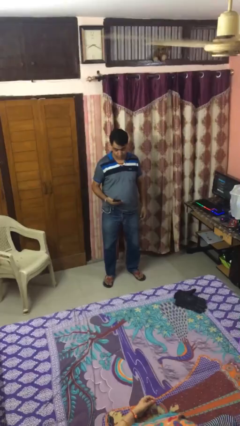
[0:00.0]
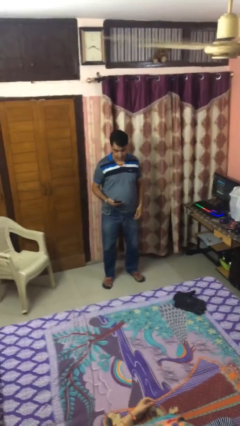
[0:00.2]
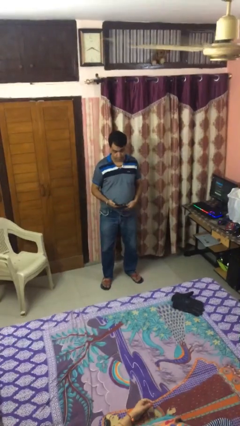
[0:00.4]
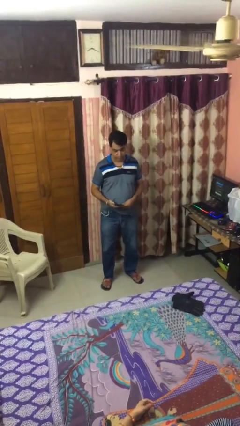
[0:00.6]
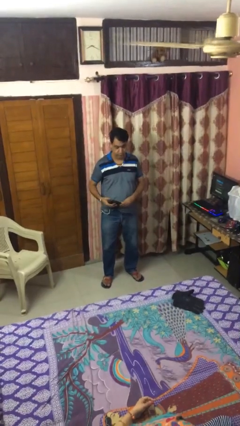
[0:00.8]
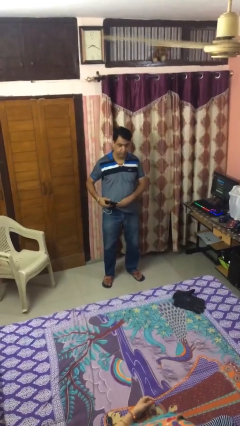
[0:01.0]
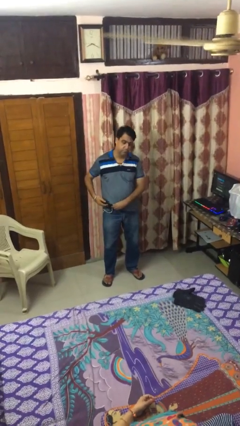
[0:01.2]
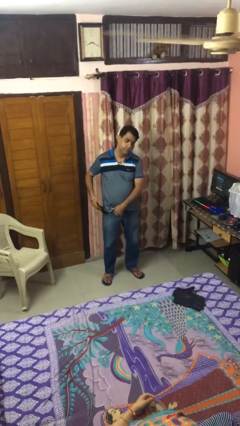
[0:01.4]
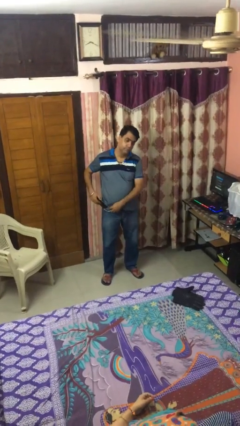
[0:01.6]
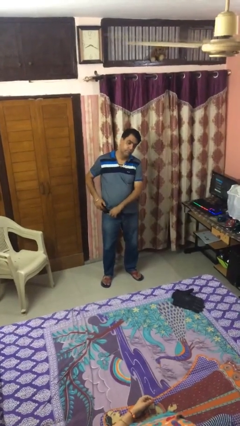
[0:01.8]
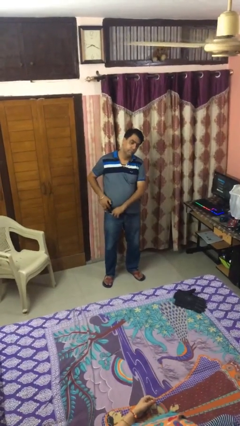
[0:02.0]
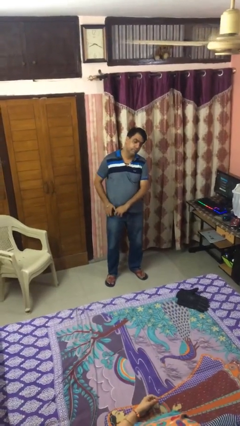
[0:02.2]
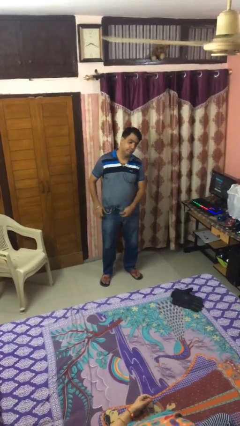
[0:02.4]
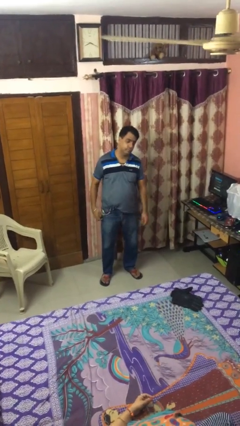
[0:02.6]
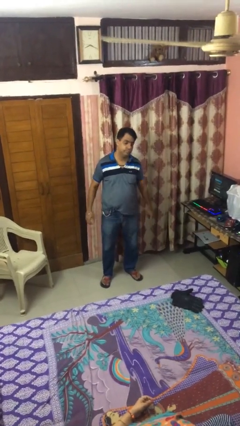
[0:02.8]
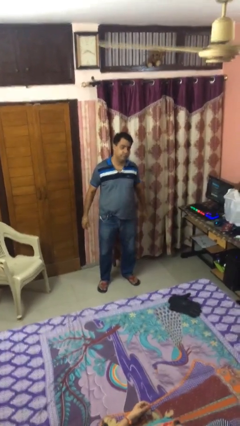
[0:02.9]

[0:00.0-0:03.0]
person puts phone into pocket

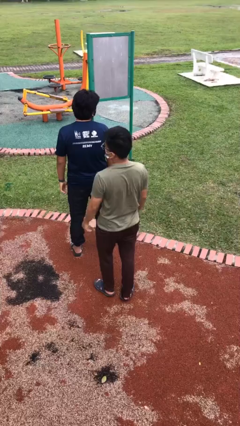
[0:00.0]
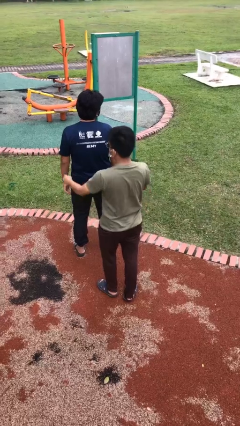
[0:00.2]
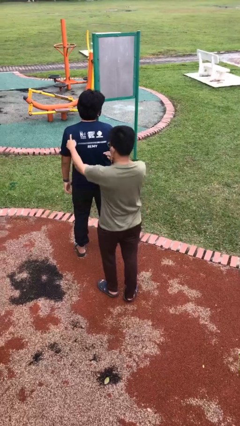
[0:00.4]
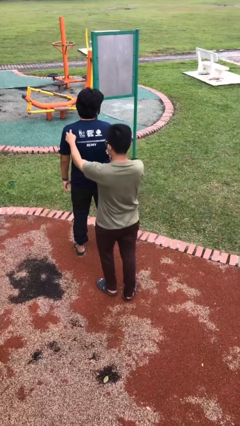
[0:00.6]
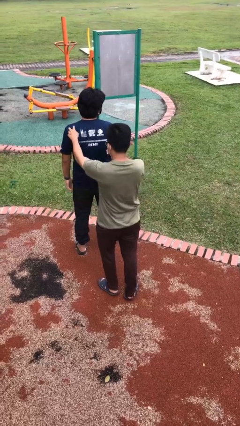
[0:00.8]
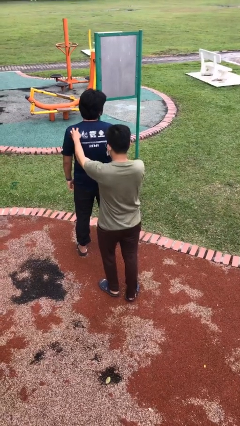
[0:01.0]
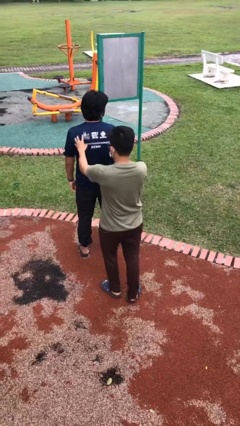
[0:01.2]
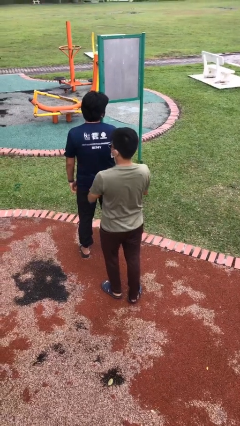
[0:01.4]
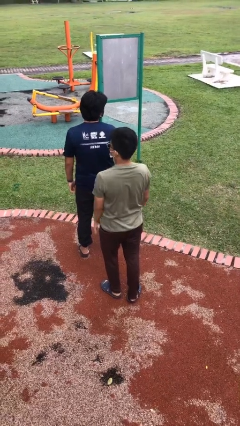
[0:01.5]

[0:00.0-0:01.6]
person tickles person

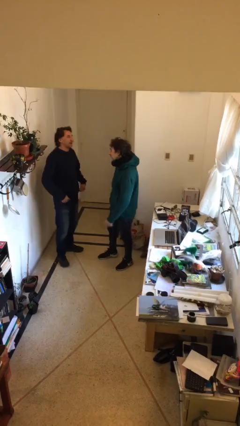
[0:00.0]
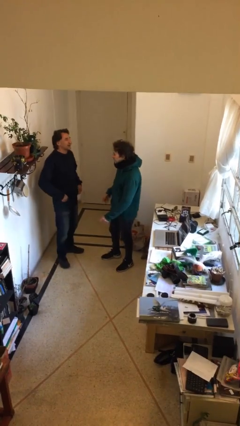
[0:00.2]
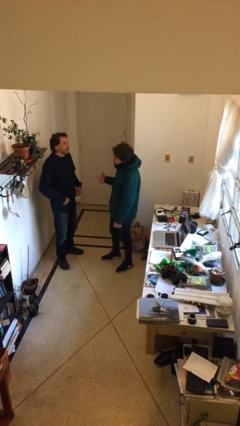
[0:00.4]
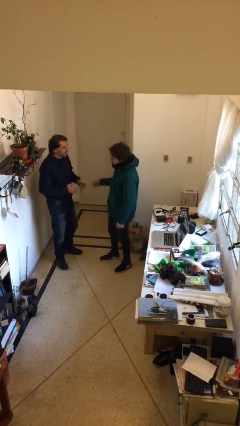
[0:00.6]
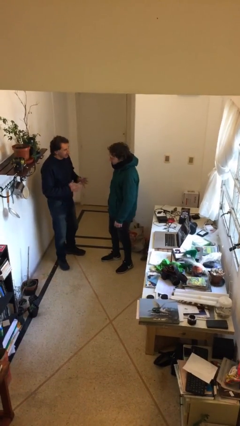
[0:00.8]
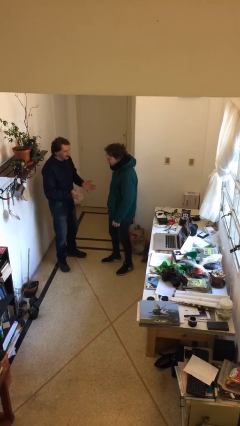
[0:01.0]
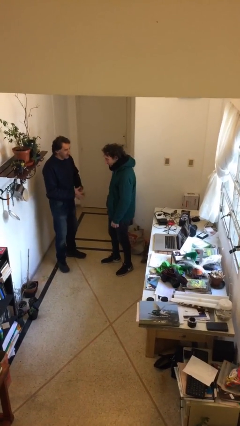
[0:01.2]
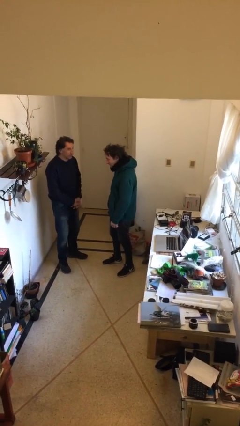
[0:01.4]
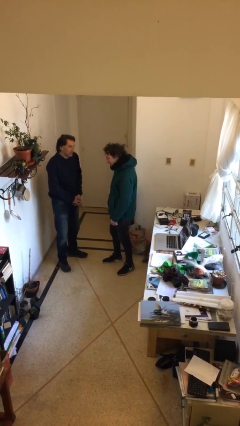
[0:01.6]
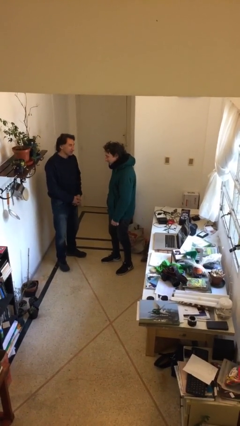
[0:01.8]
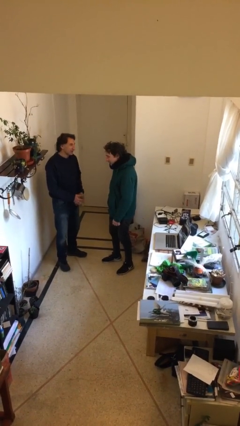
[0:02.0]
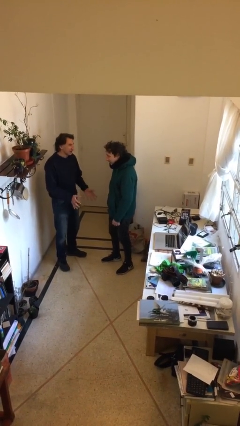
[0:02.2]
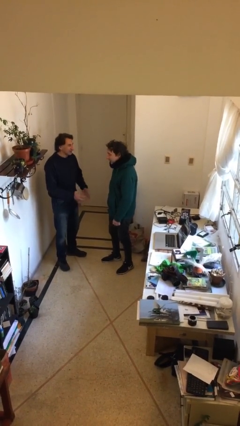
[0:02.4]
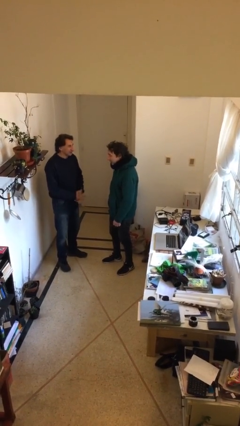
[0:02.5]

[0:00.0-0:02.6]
person talks to person

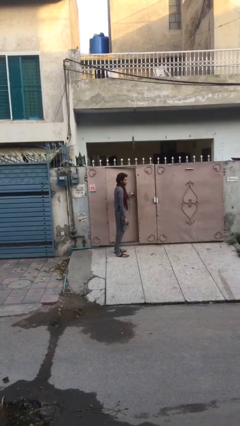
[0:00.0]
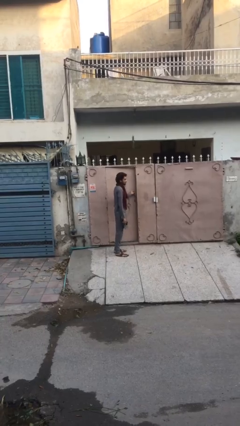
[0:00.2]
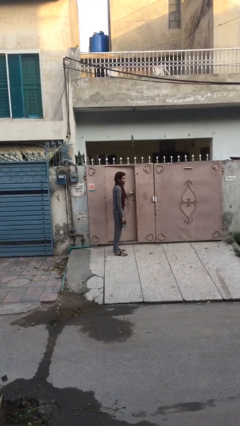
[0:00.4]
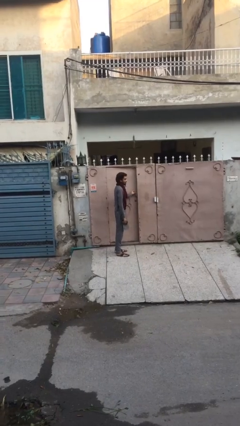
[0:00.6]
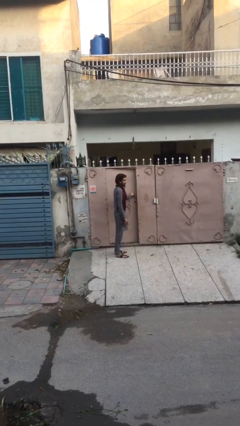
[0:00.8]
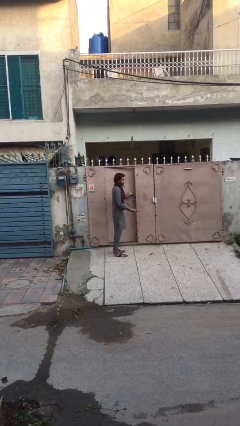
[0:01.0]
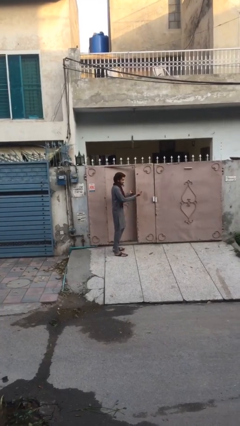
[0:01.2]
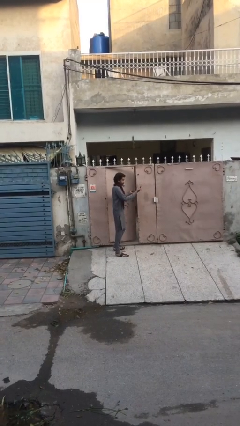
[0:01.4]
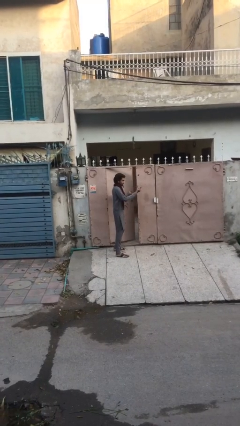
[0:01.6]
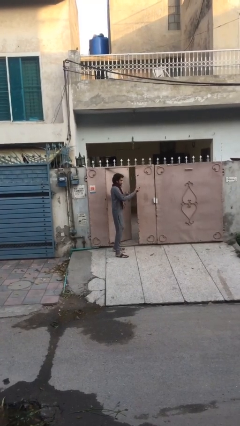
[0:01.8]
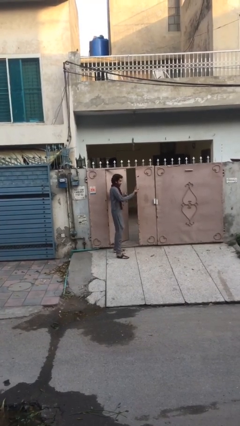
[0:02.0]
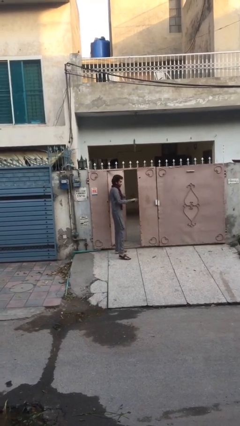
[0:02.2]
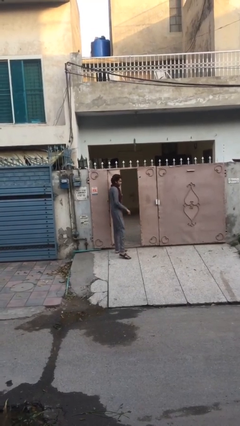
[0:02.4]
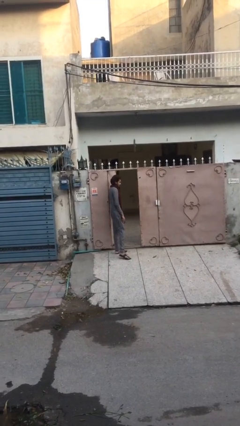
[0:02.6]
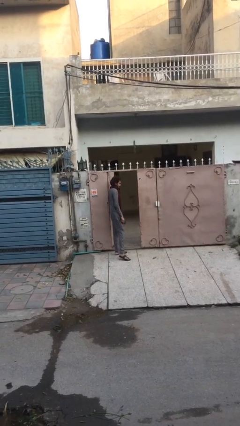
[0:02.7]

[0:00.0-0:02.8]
person opens facility door

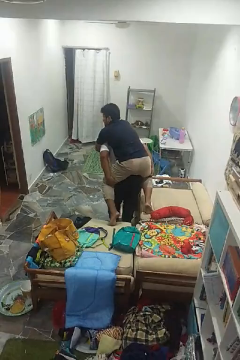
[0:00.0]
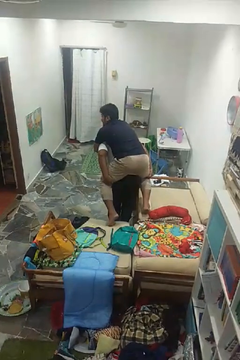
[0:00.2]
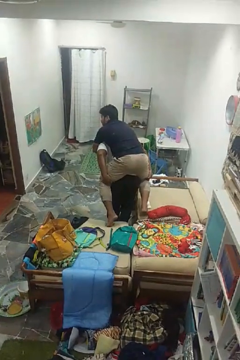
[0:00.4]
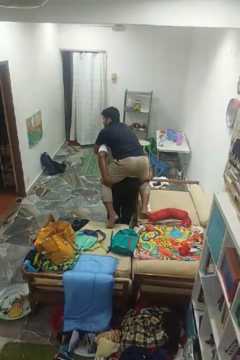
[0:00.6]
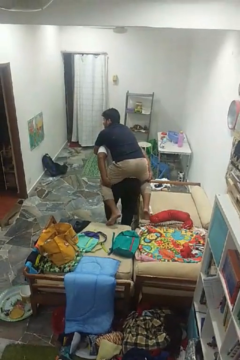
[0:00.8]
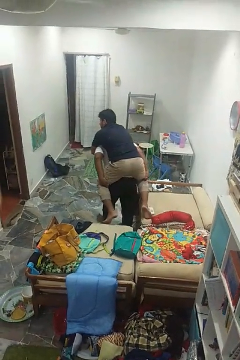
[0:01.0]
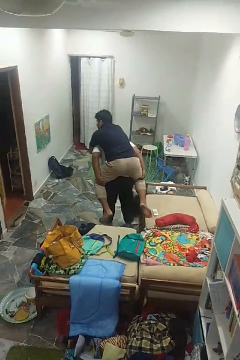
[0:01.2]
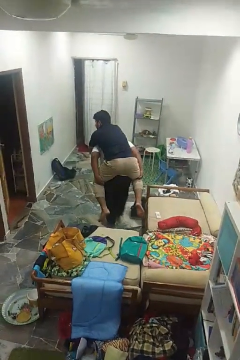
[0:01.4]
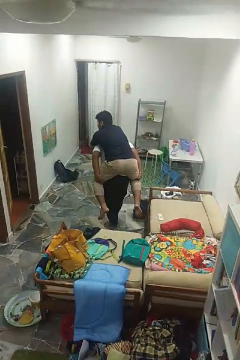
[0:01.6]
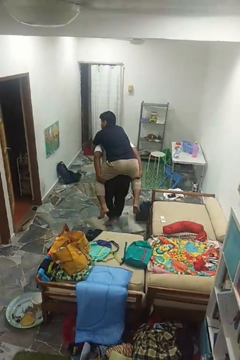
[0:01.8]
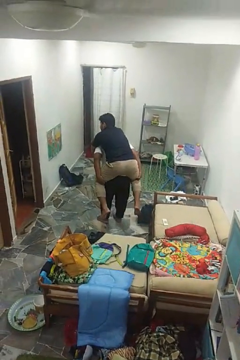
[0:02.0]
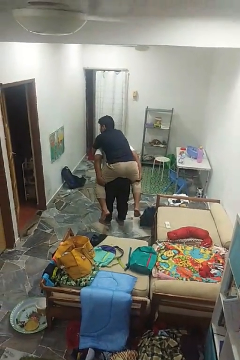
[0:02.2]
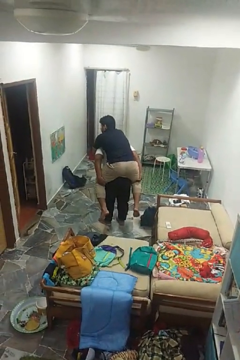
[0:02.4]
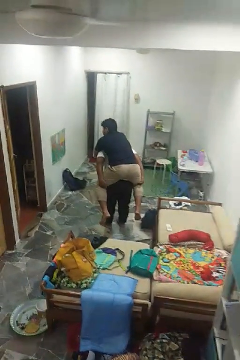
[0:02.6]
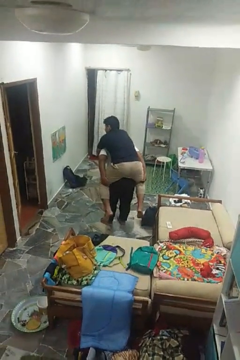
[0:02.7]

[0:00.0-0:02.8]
person carries person on back

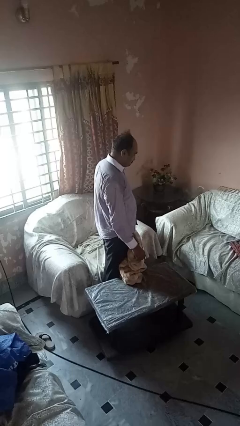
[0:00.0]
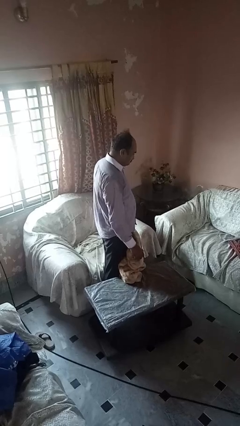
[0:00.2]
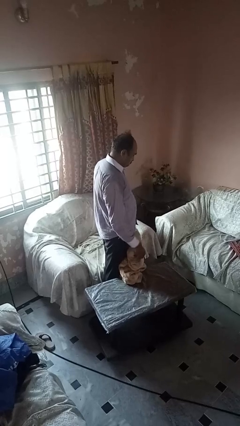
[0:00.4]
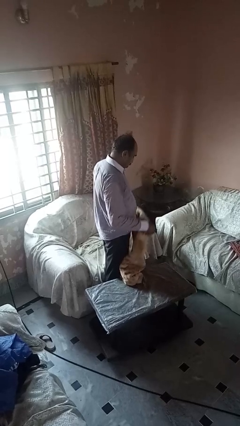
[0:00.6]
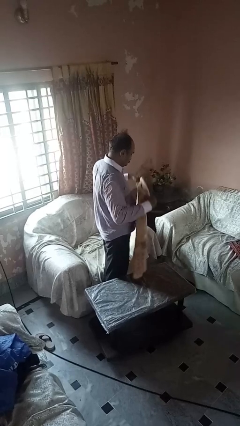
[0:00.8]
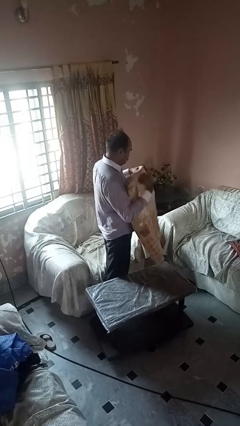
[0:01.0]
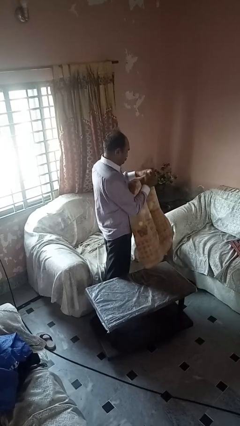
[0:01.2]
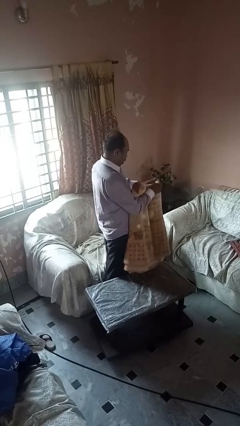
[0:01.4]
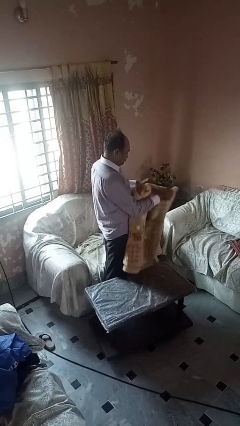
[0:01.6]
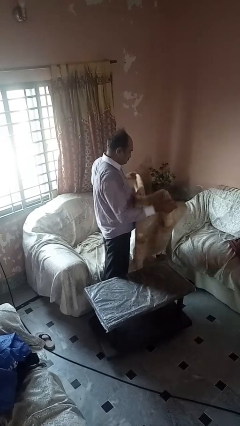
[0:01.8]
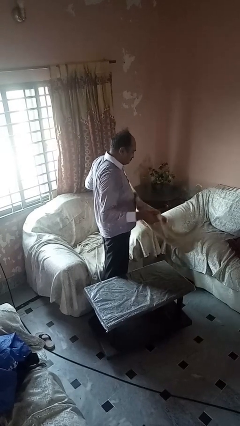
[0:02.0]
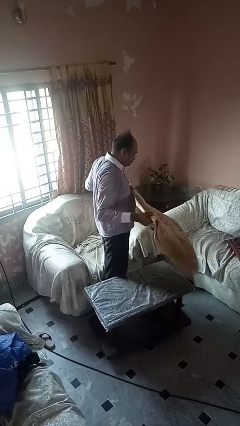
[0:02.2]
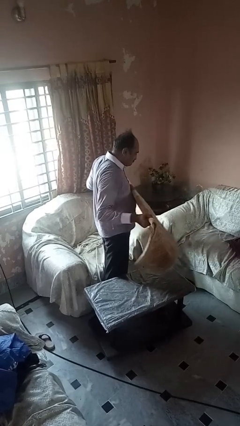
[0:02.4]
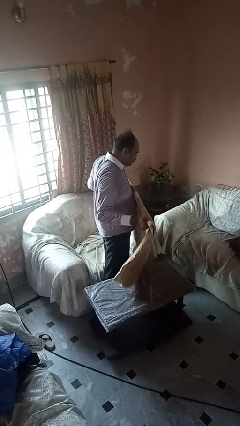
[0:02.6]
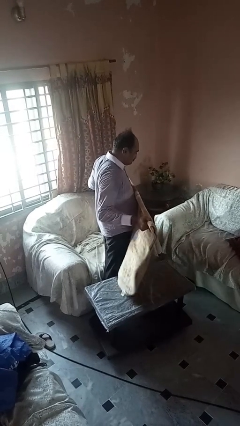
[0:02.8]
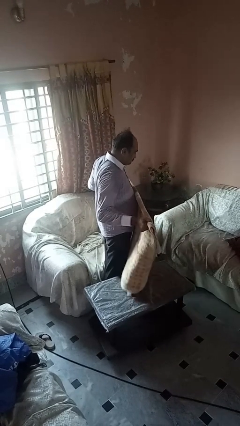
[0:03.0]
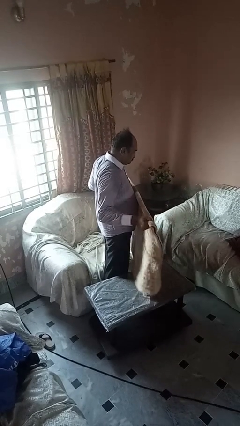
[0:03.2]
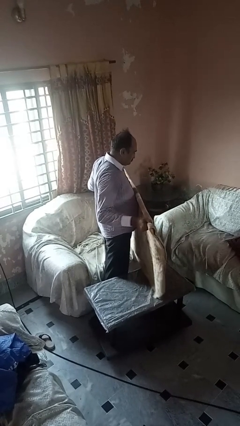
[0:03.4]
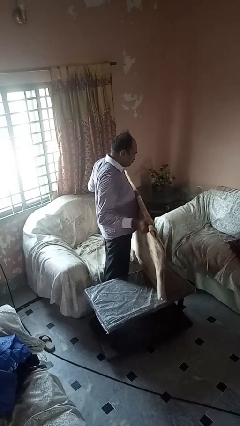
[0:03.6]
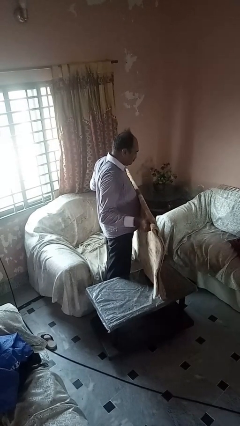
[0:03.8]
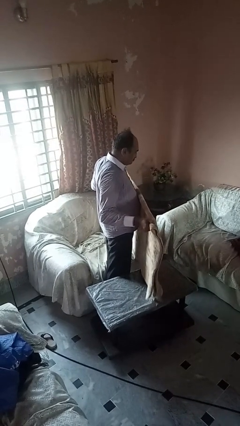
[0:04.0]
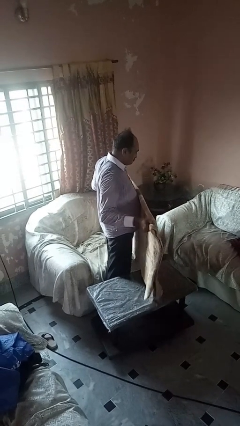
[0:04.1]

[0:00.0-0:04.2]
person unfolds blanket

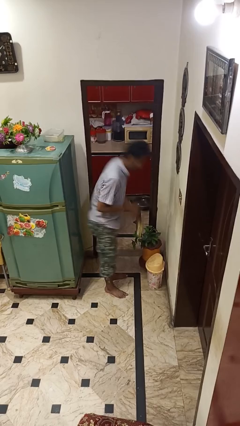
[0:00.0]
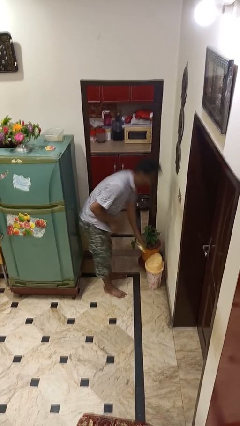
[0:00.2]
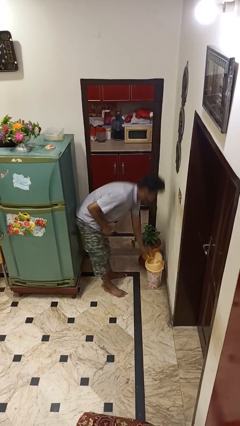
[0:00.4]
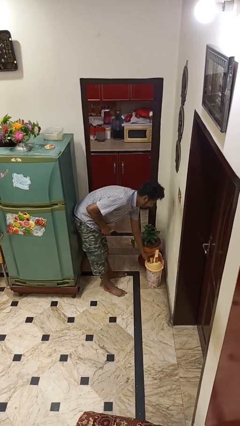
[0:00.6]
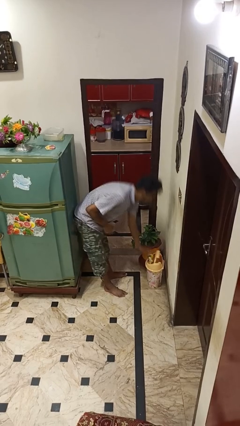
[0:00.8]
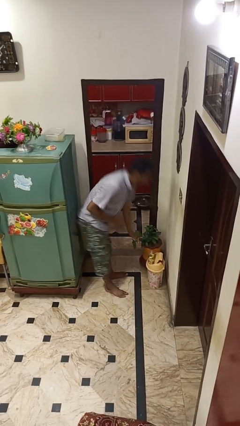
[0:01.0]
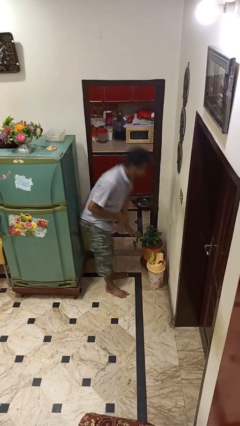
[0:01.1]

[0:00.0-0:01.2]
person discards trash
